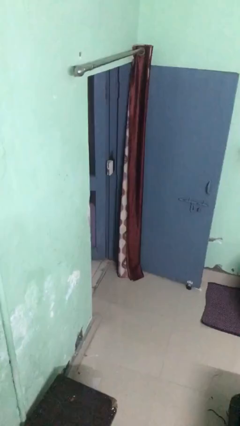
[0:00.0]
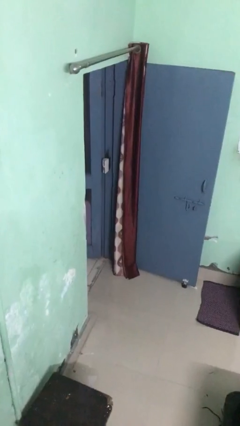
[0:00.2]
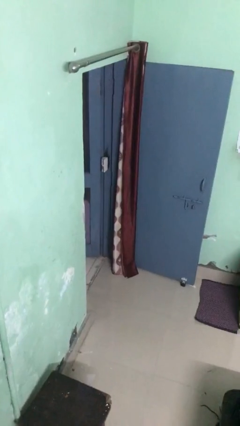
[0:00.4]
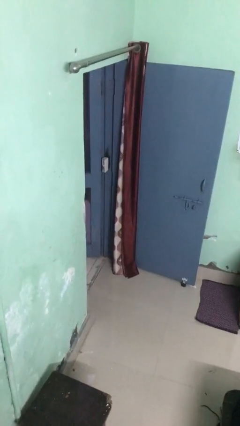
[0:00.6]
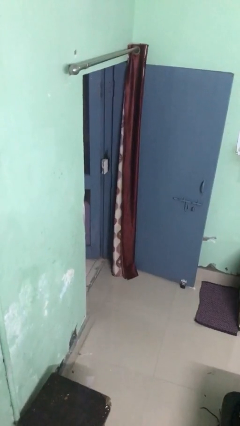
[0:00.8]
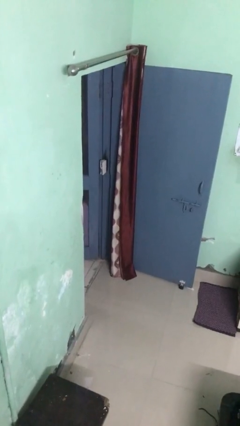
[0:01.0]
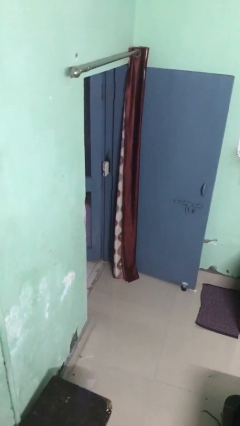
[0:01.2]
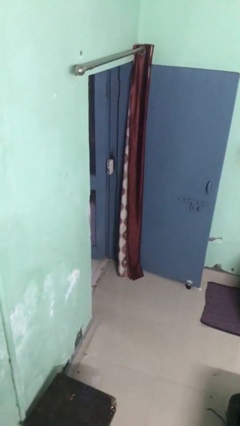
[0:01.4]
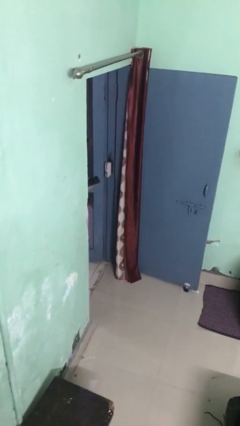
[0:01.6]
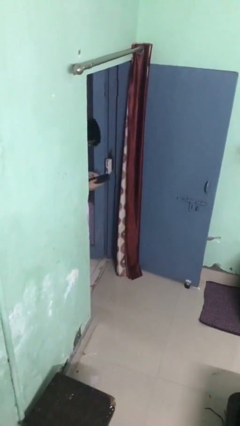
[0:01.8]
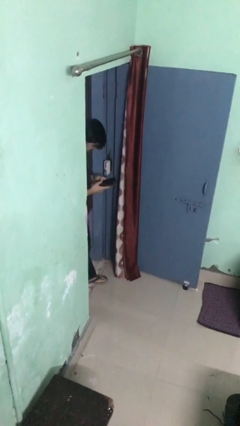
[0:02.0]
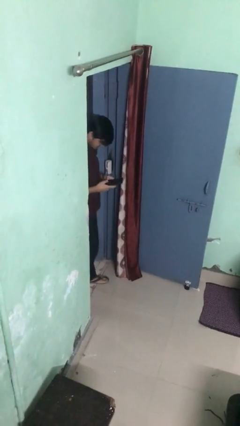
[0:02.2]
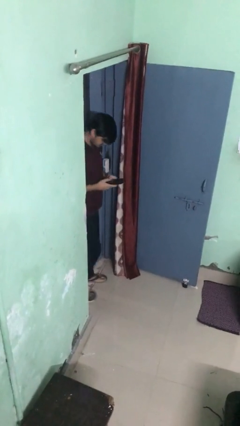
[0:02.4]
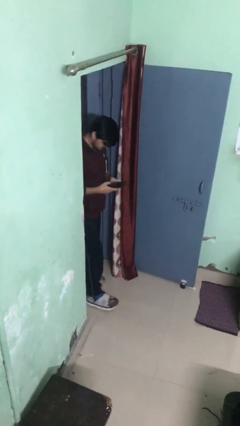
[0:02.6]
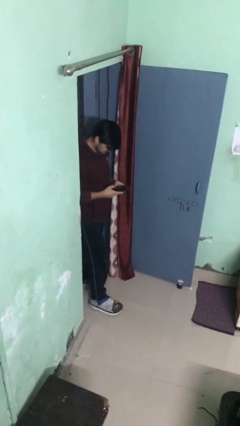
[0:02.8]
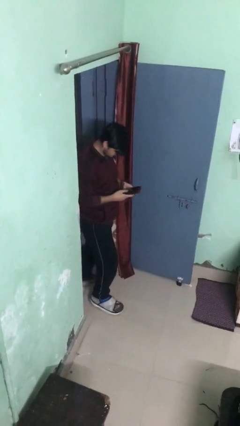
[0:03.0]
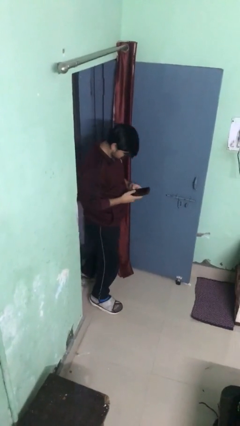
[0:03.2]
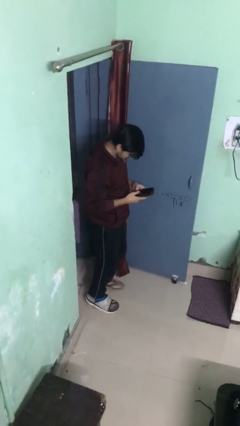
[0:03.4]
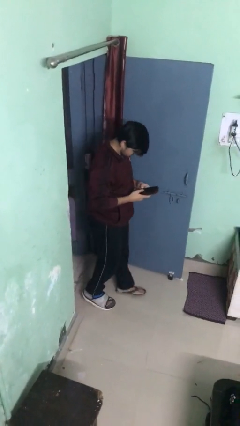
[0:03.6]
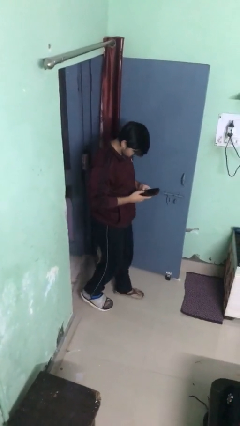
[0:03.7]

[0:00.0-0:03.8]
person enters scene through structure

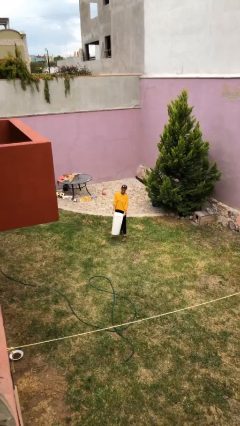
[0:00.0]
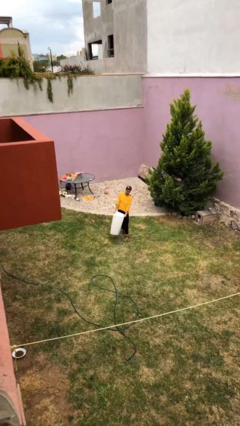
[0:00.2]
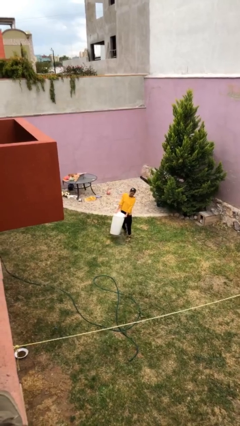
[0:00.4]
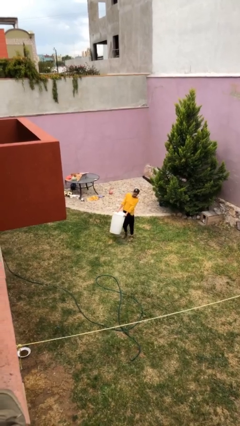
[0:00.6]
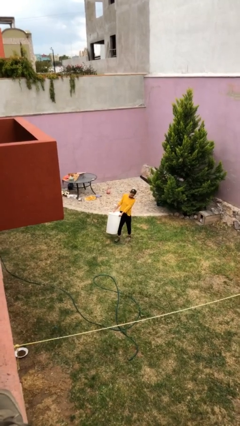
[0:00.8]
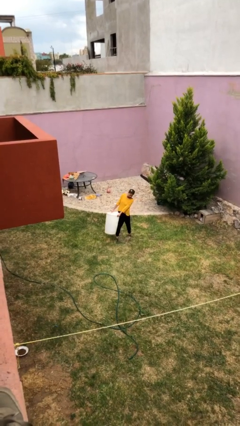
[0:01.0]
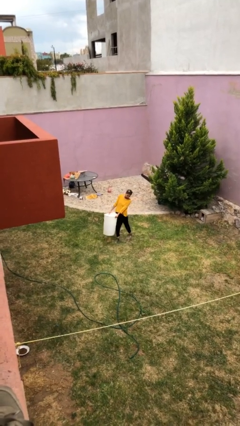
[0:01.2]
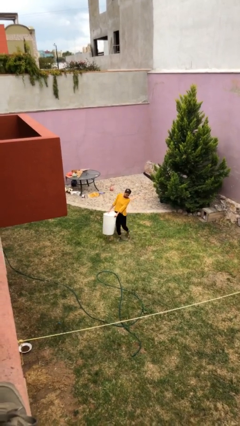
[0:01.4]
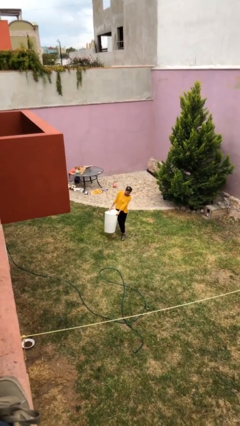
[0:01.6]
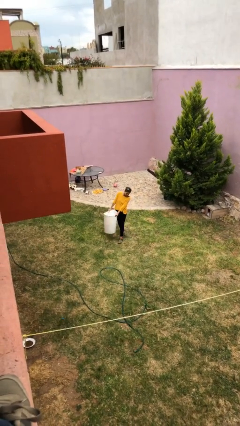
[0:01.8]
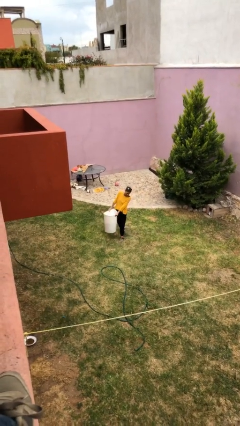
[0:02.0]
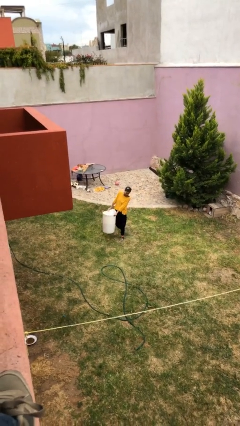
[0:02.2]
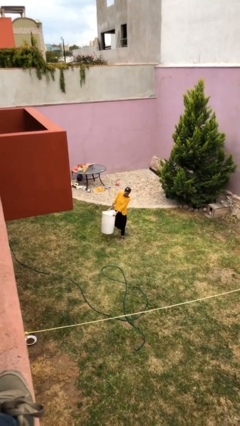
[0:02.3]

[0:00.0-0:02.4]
person carries heavy object

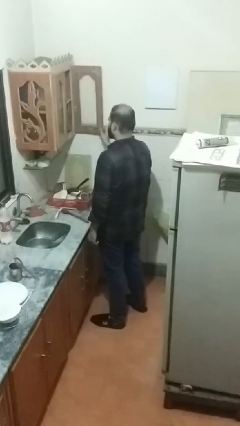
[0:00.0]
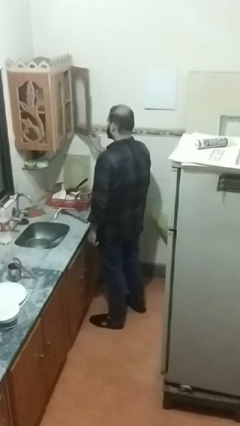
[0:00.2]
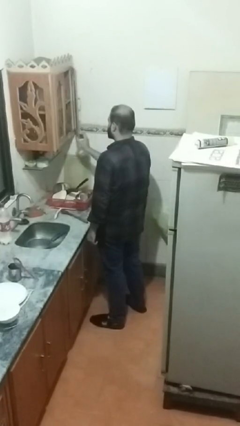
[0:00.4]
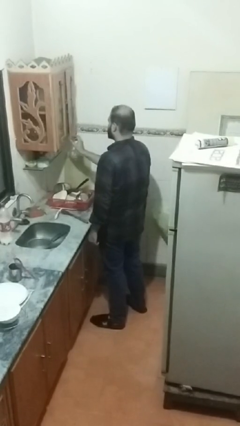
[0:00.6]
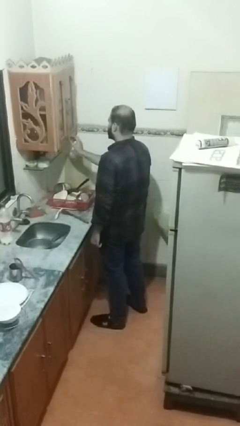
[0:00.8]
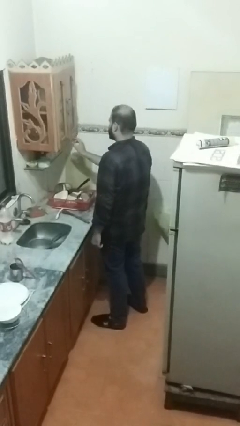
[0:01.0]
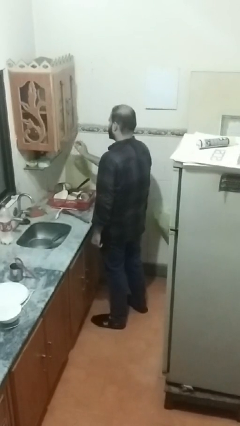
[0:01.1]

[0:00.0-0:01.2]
person closes kitchen drawer

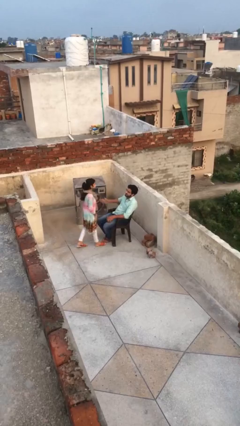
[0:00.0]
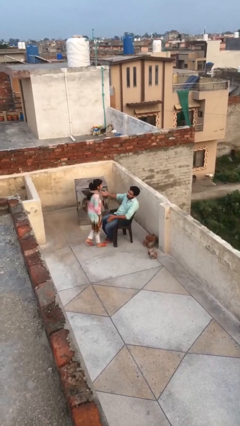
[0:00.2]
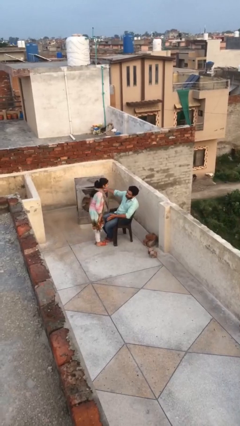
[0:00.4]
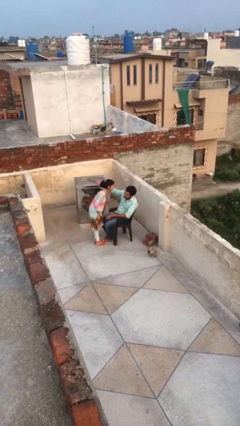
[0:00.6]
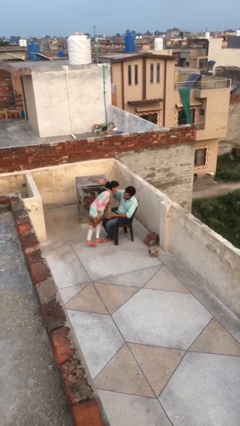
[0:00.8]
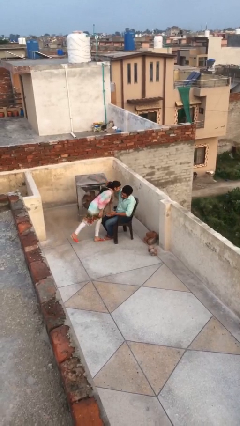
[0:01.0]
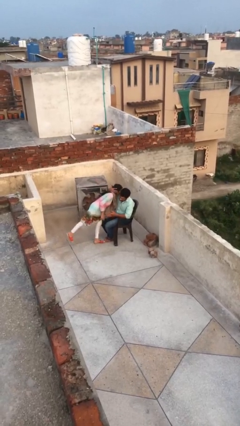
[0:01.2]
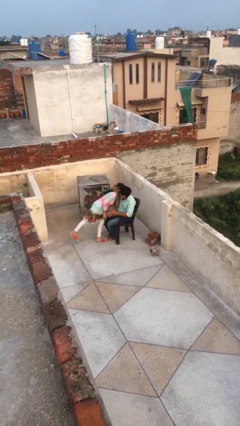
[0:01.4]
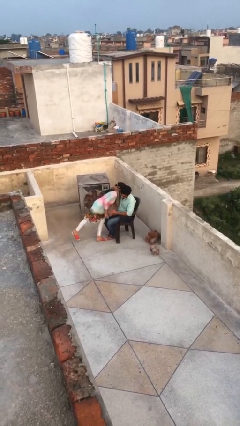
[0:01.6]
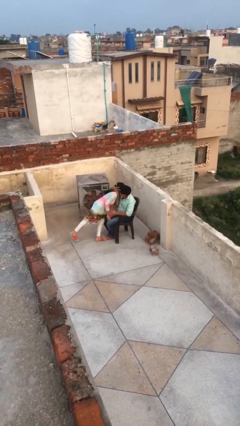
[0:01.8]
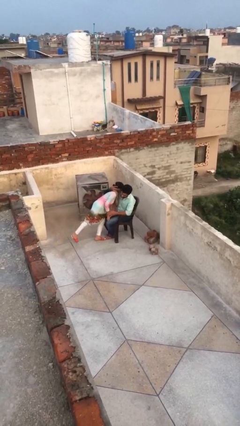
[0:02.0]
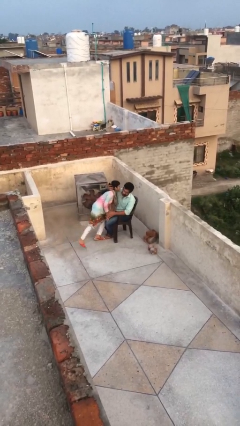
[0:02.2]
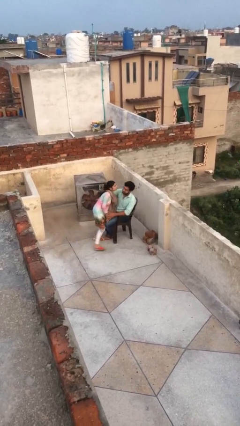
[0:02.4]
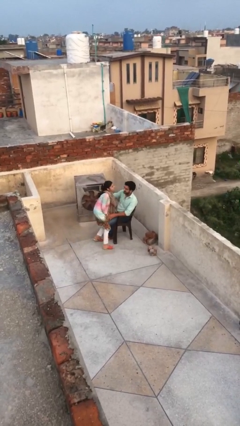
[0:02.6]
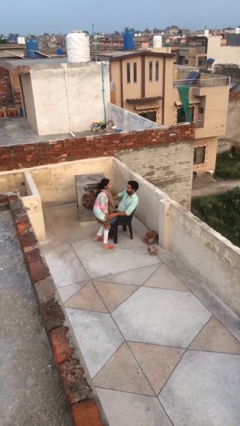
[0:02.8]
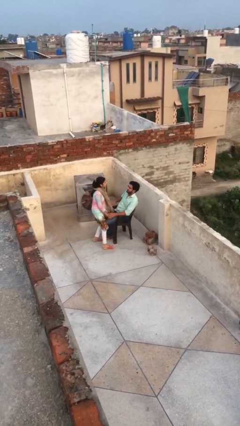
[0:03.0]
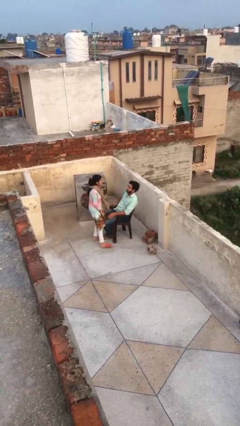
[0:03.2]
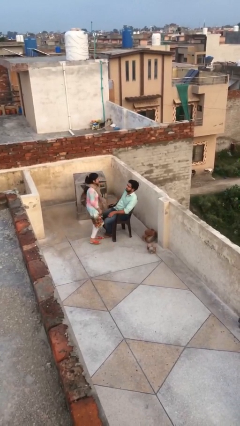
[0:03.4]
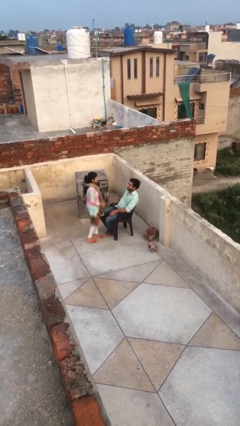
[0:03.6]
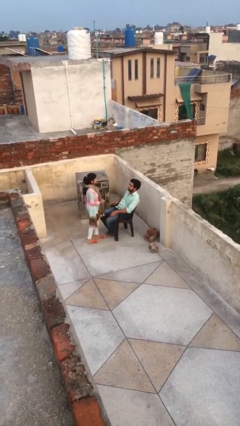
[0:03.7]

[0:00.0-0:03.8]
person embraces person

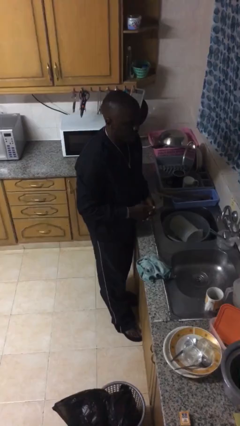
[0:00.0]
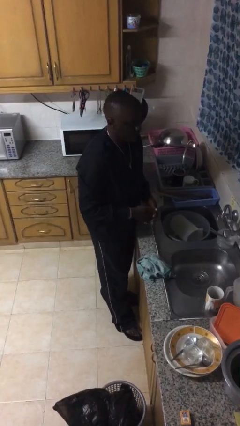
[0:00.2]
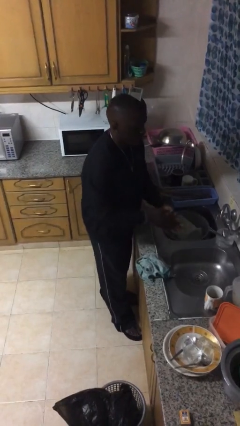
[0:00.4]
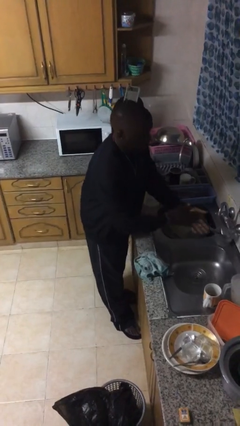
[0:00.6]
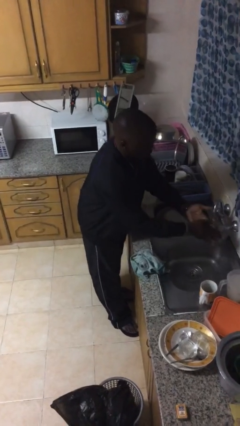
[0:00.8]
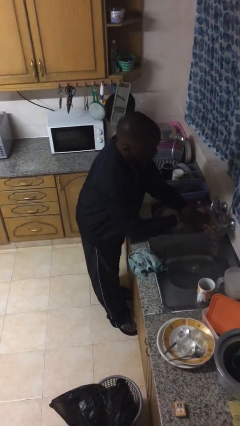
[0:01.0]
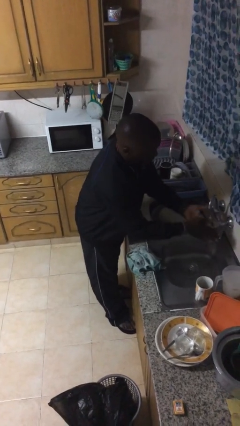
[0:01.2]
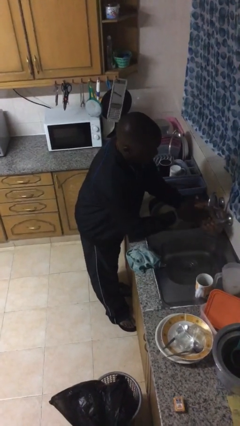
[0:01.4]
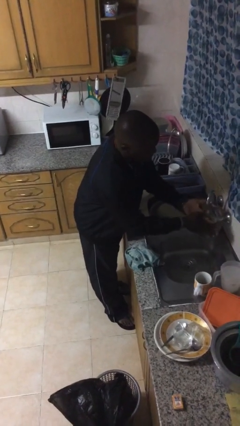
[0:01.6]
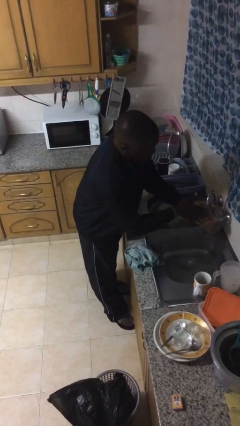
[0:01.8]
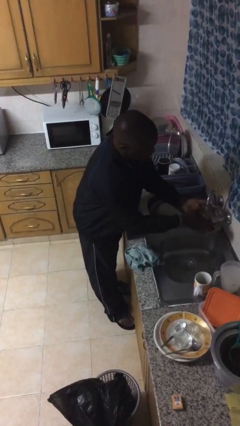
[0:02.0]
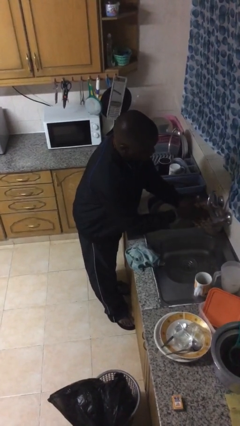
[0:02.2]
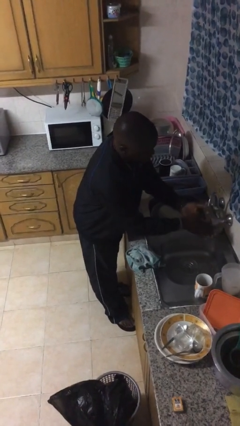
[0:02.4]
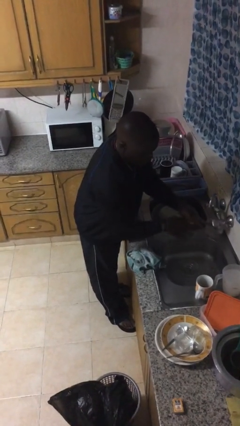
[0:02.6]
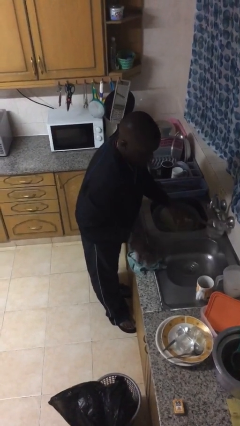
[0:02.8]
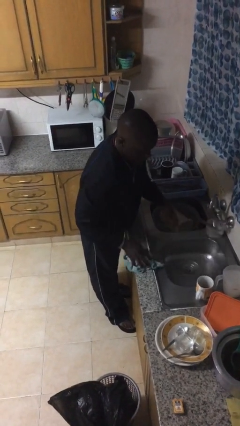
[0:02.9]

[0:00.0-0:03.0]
person washes hands

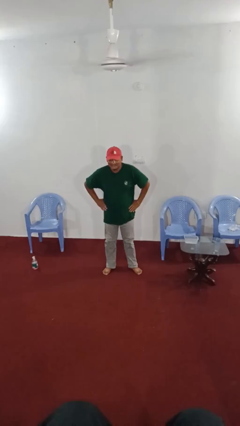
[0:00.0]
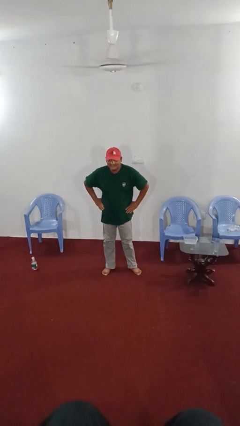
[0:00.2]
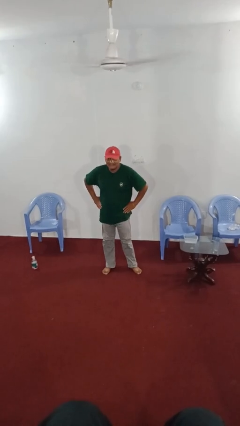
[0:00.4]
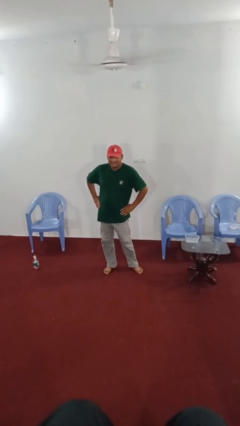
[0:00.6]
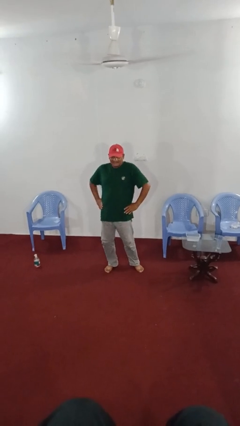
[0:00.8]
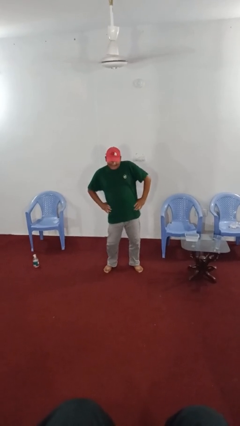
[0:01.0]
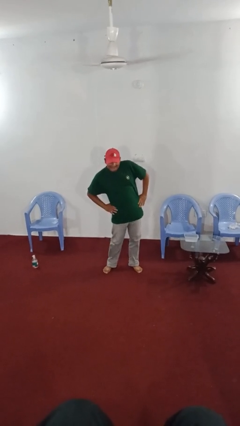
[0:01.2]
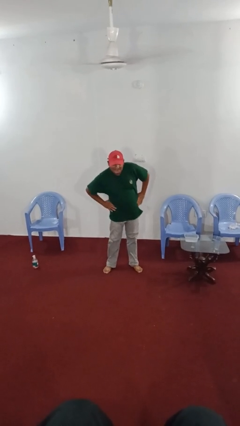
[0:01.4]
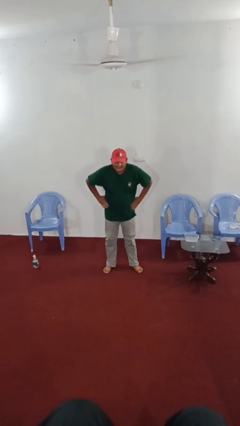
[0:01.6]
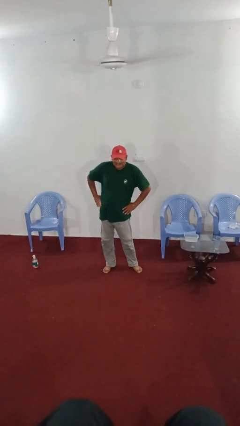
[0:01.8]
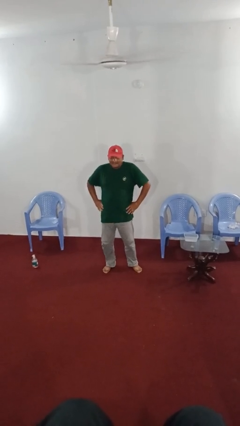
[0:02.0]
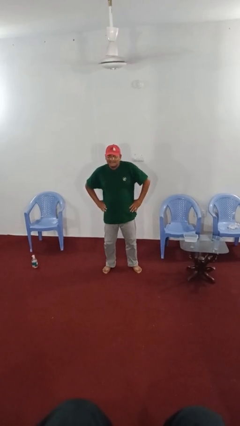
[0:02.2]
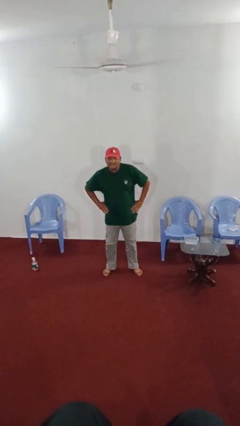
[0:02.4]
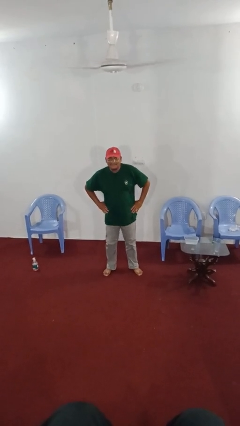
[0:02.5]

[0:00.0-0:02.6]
person wiggles hips

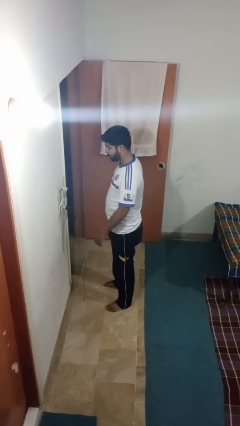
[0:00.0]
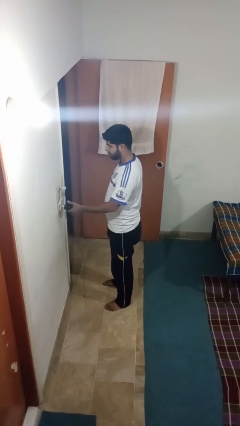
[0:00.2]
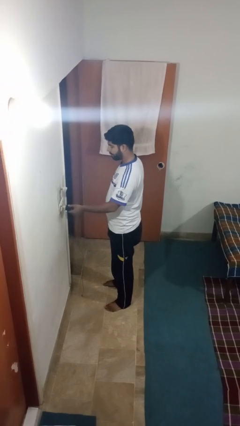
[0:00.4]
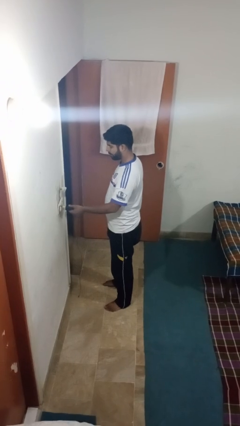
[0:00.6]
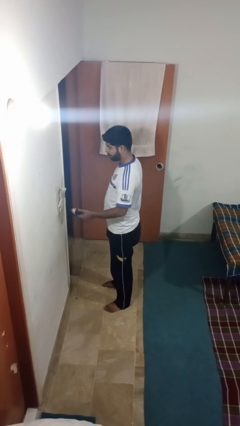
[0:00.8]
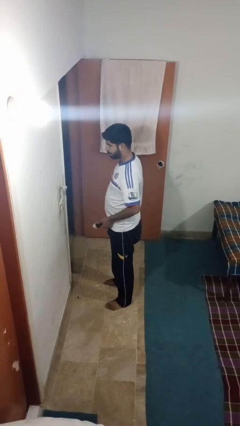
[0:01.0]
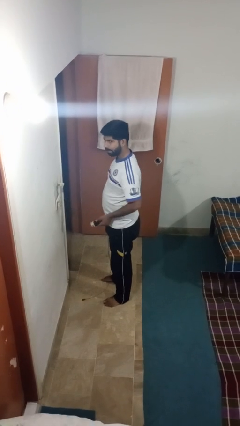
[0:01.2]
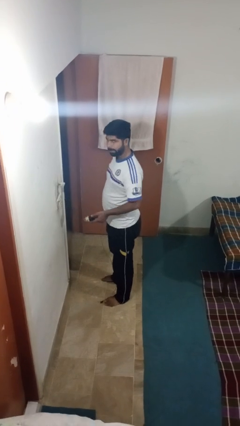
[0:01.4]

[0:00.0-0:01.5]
person unplugs from electrical socket
